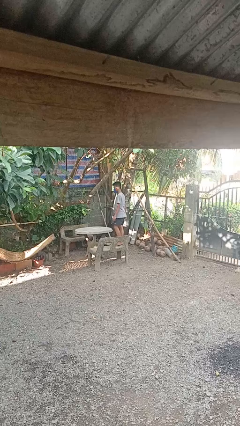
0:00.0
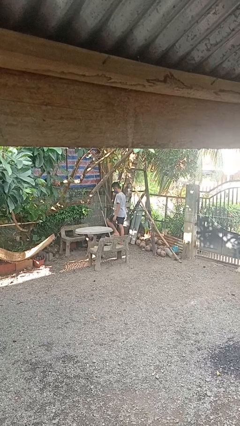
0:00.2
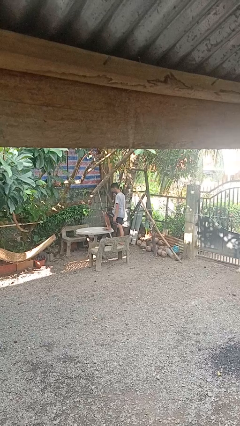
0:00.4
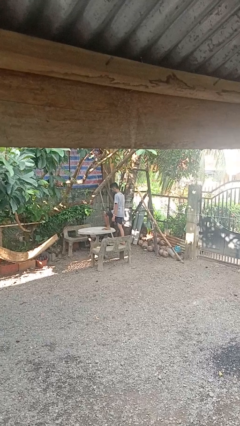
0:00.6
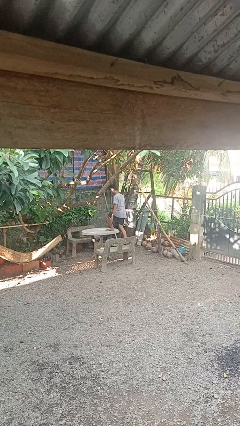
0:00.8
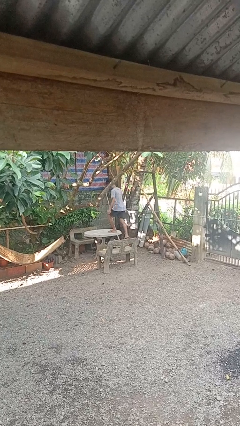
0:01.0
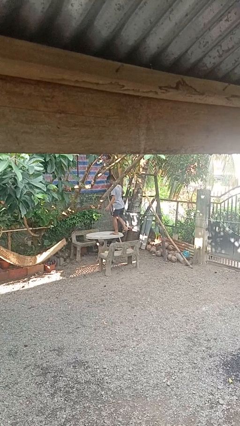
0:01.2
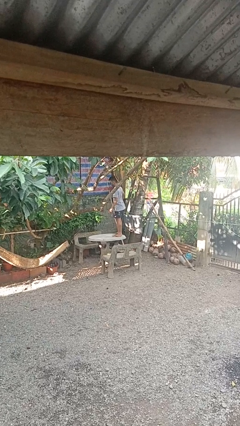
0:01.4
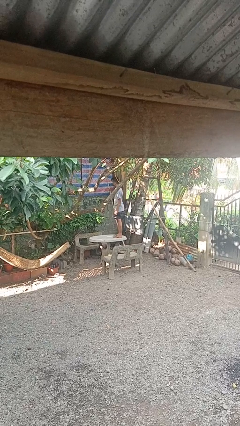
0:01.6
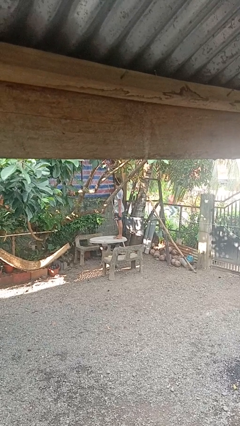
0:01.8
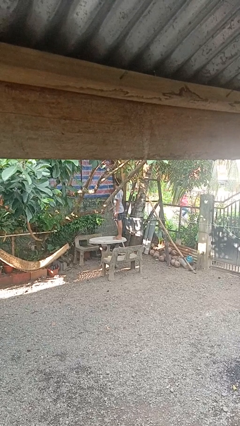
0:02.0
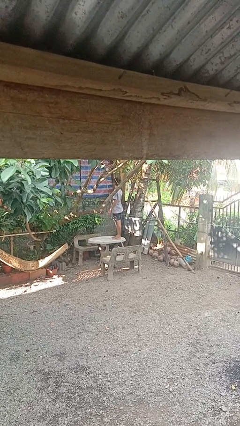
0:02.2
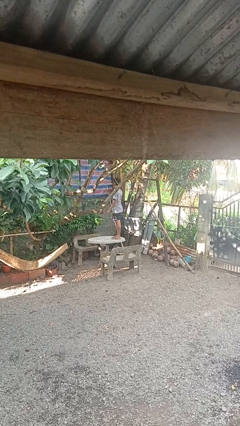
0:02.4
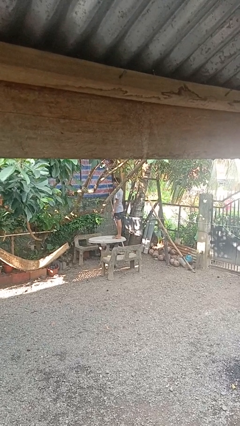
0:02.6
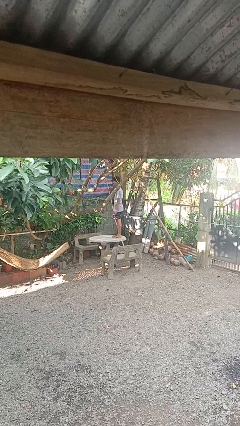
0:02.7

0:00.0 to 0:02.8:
person climbs on table

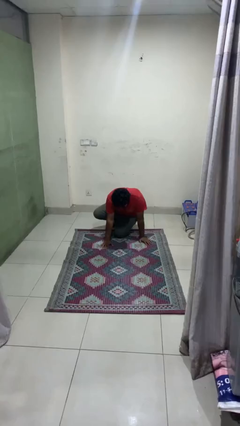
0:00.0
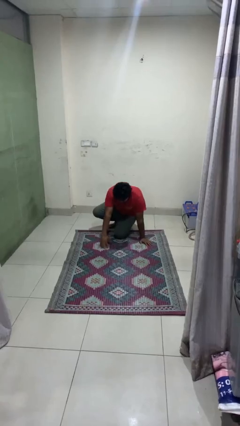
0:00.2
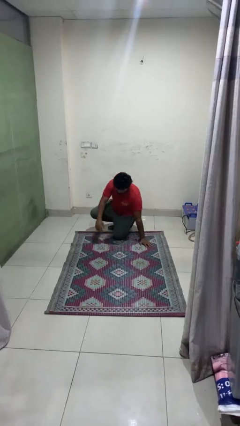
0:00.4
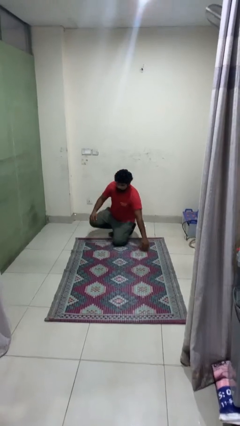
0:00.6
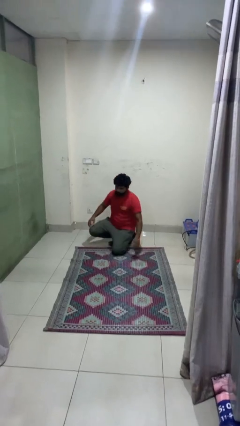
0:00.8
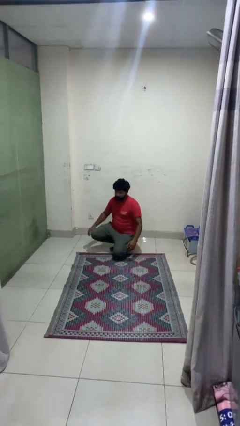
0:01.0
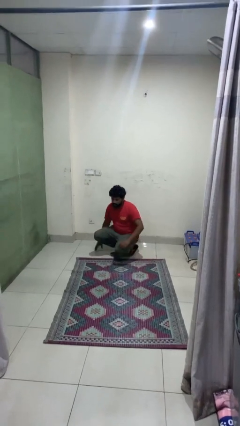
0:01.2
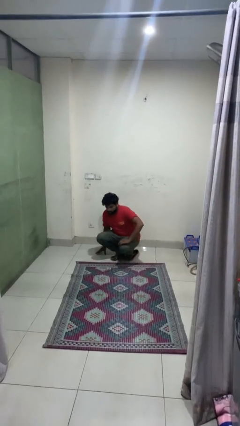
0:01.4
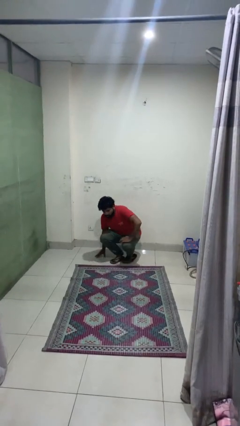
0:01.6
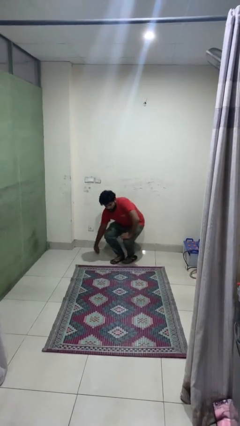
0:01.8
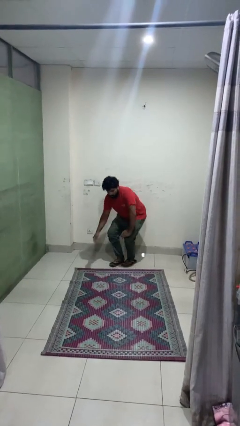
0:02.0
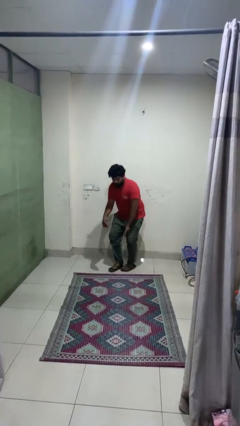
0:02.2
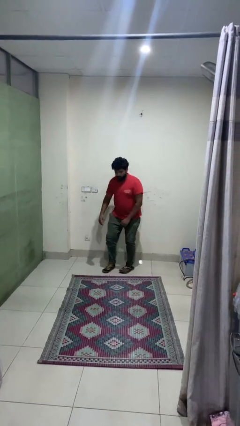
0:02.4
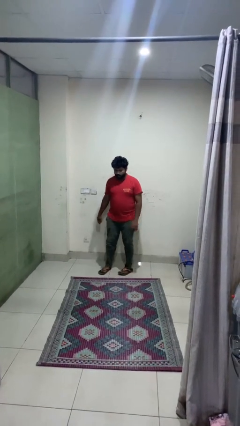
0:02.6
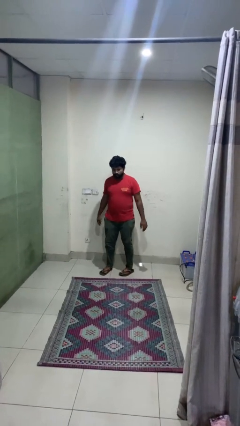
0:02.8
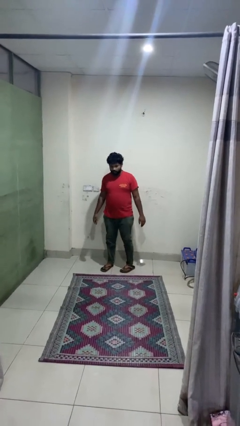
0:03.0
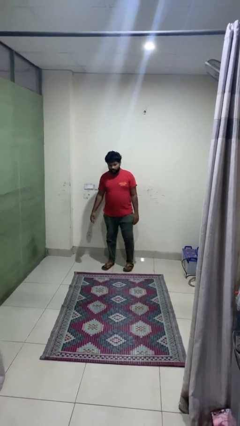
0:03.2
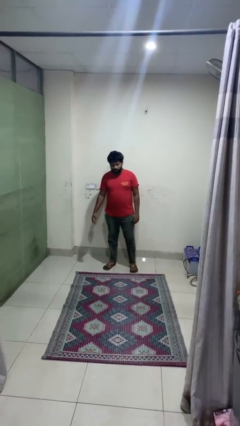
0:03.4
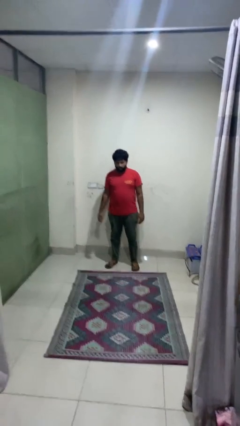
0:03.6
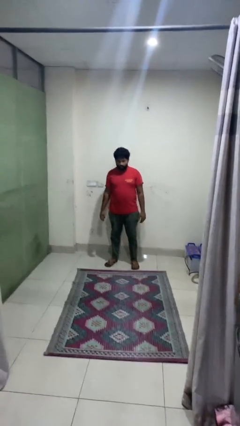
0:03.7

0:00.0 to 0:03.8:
person stands up from floor

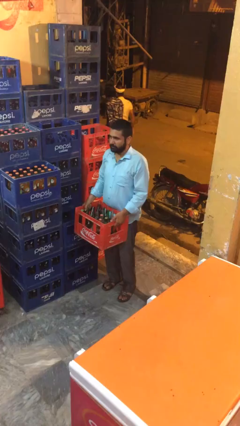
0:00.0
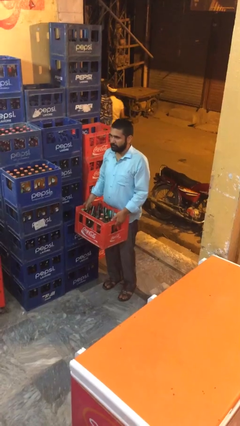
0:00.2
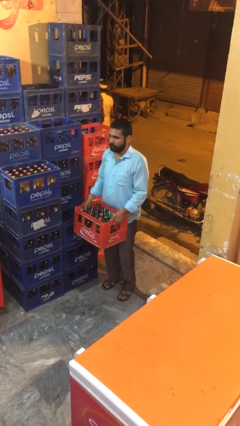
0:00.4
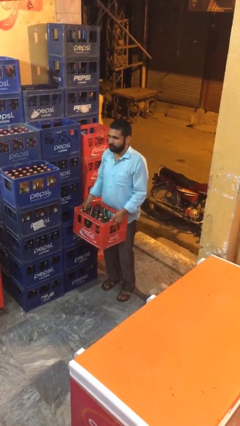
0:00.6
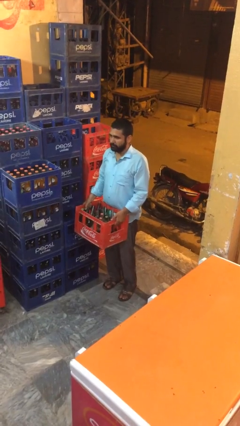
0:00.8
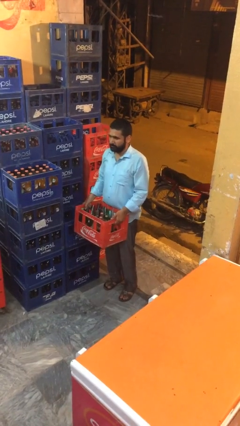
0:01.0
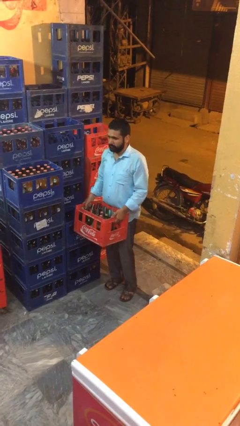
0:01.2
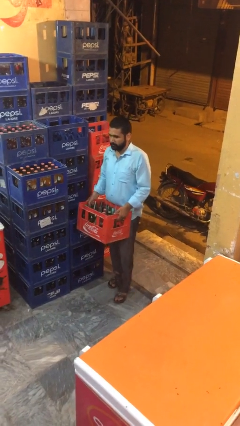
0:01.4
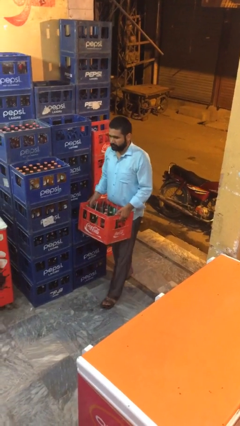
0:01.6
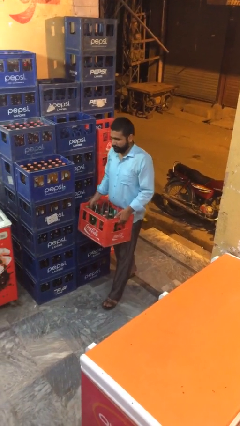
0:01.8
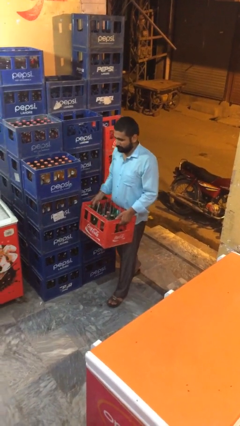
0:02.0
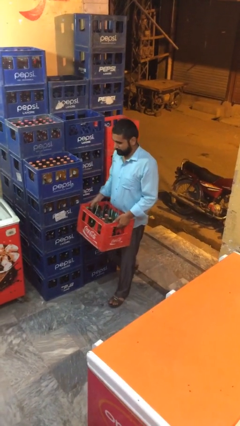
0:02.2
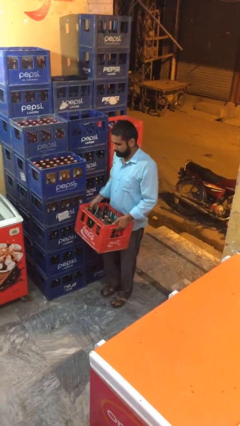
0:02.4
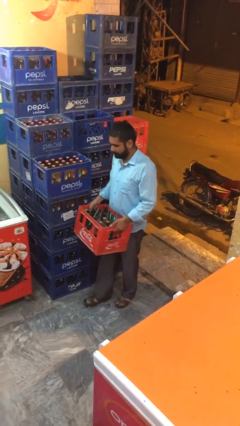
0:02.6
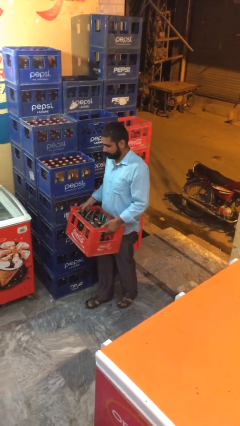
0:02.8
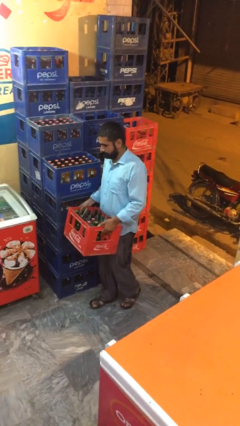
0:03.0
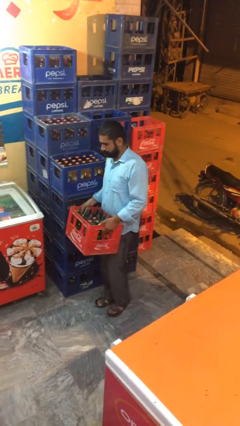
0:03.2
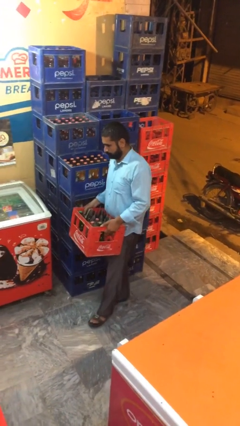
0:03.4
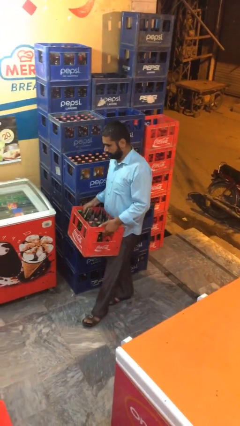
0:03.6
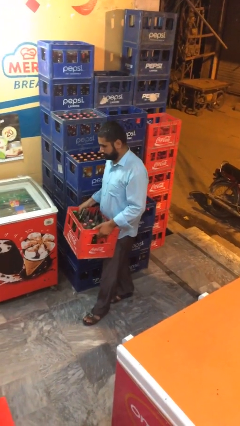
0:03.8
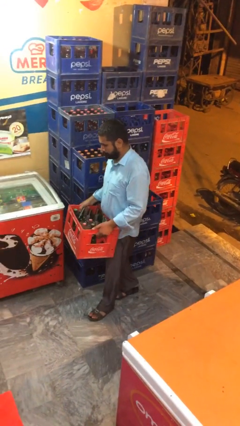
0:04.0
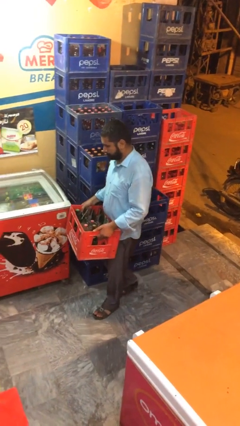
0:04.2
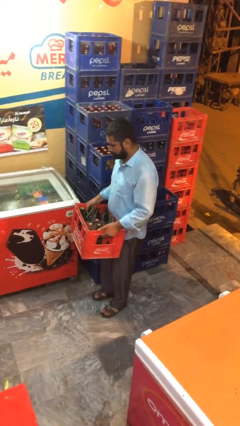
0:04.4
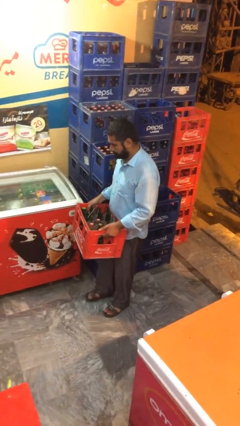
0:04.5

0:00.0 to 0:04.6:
person carries heavy object

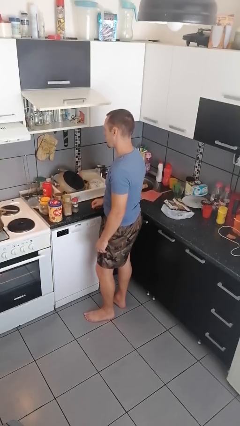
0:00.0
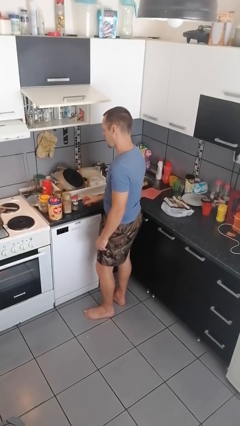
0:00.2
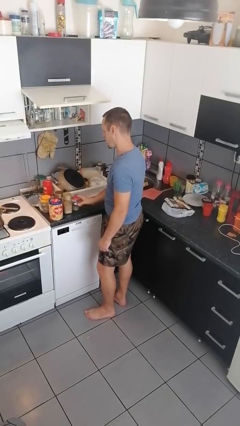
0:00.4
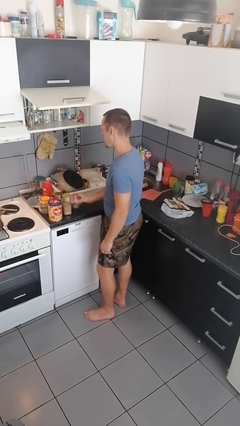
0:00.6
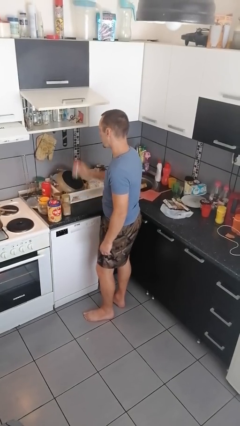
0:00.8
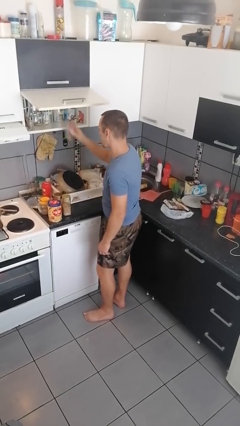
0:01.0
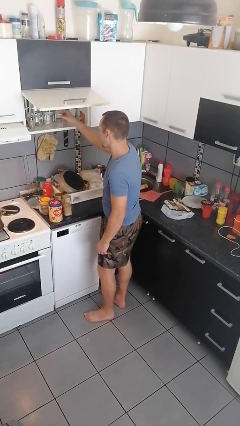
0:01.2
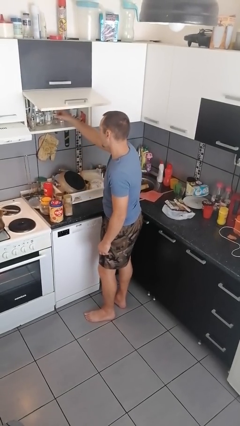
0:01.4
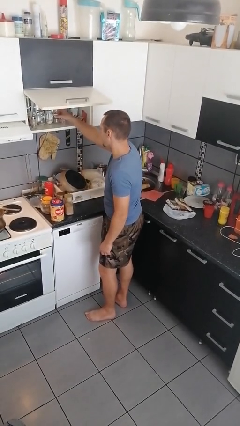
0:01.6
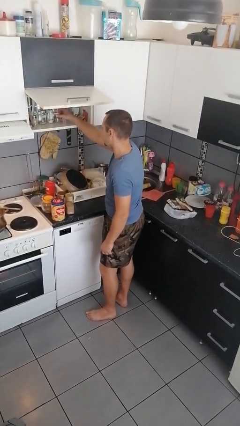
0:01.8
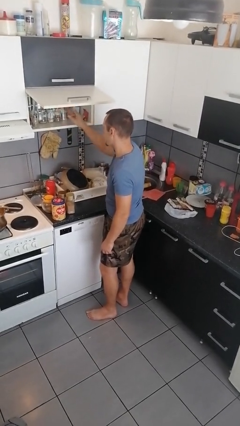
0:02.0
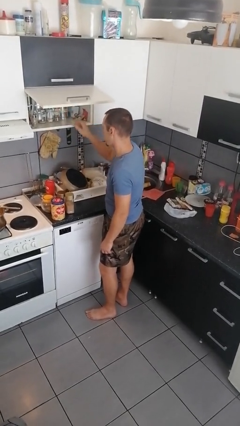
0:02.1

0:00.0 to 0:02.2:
person loads groceries into cabinet

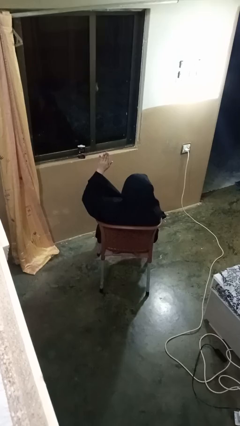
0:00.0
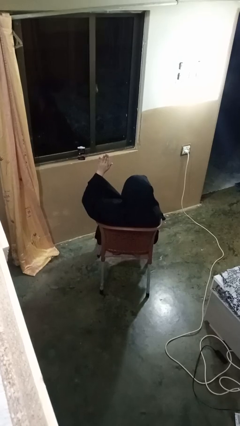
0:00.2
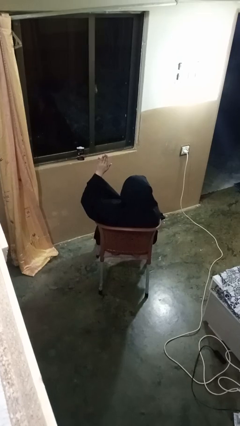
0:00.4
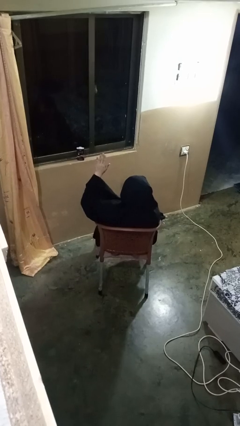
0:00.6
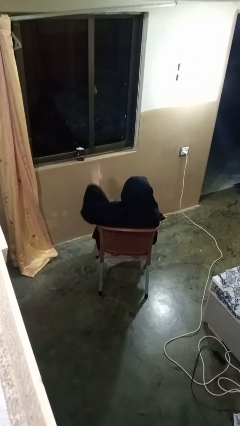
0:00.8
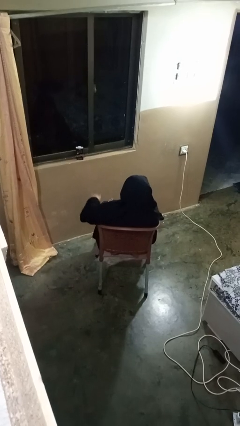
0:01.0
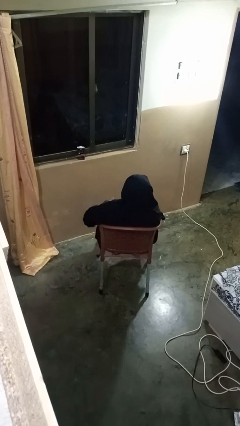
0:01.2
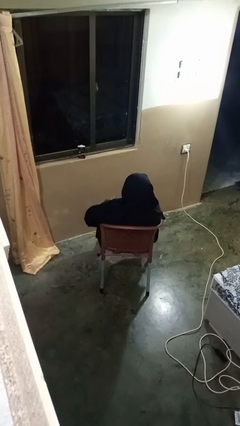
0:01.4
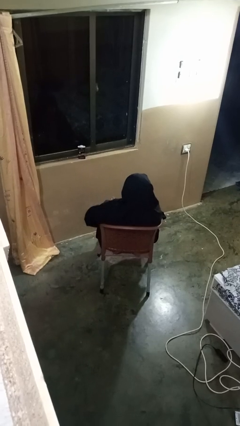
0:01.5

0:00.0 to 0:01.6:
person gestures lower hand

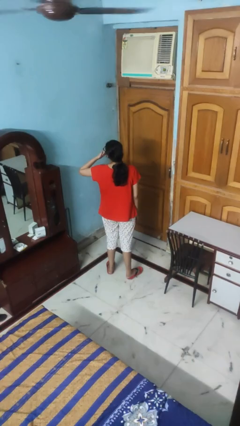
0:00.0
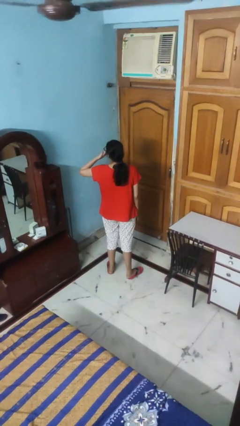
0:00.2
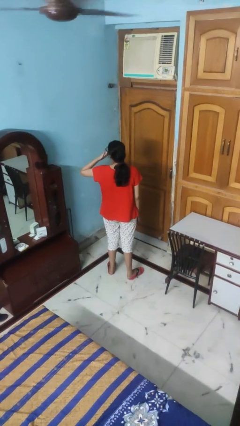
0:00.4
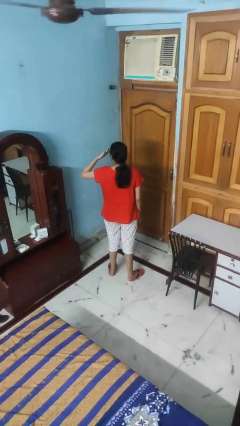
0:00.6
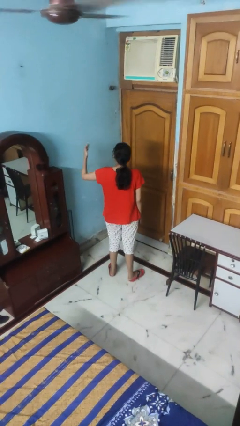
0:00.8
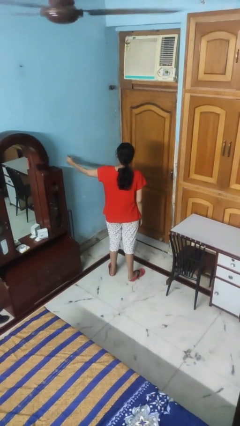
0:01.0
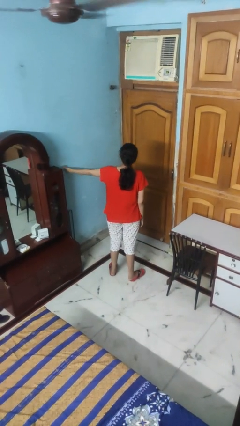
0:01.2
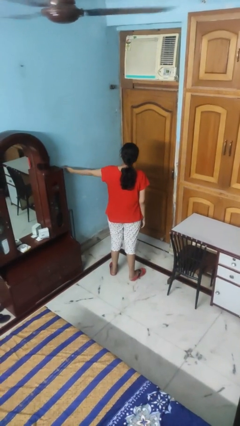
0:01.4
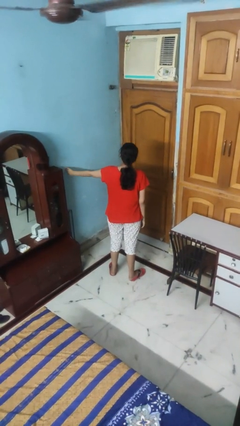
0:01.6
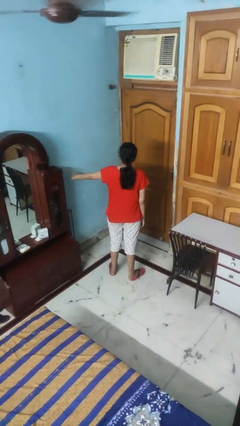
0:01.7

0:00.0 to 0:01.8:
person gestures blow kiss

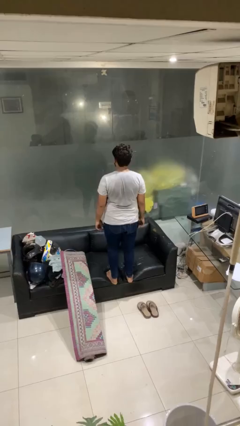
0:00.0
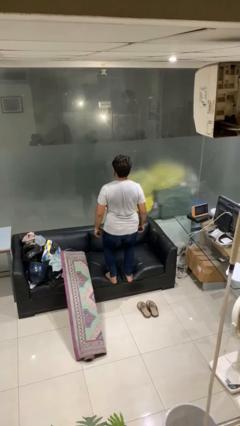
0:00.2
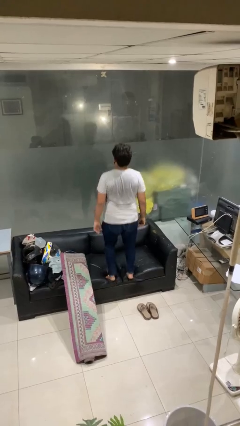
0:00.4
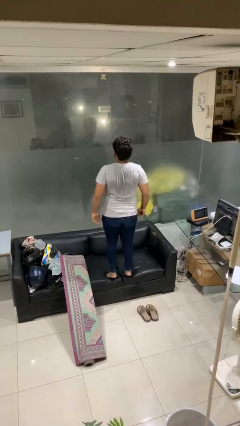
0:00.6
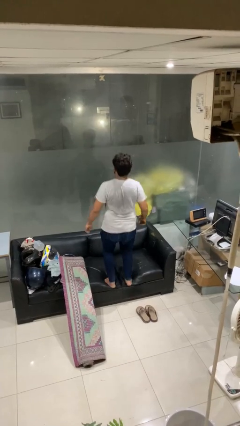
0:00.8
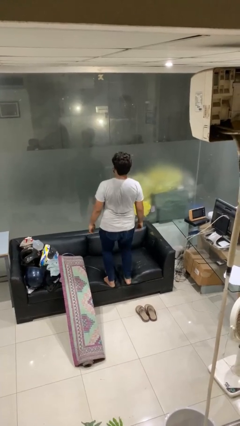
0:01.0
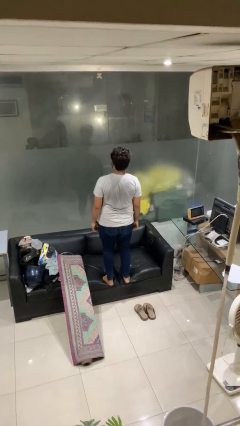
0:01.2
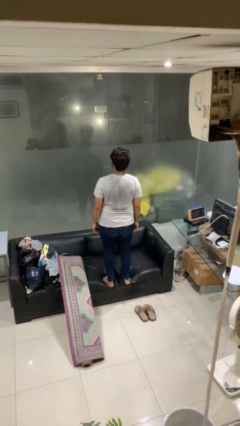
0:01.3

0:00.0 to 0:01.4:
person jumps on couch
